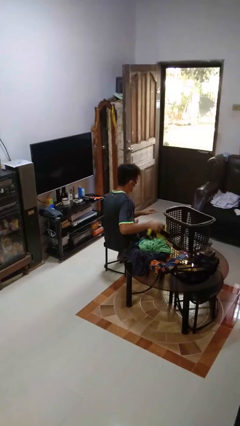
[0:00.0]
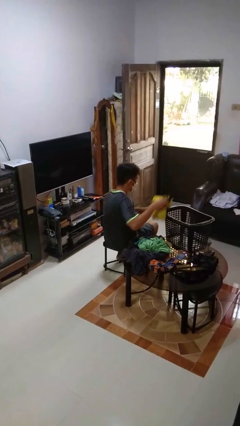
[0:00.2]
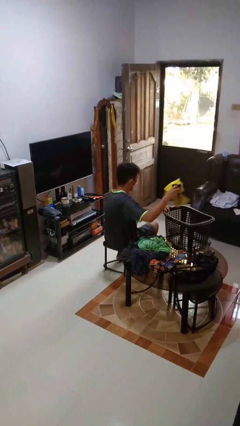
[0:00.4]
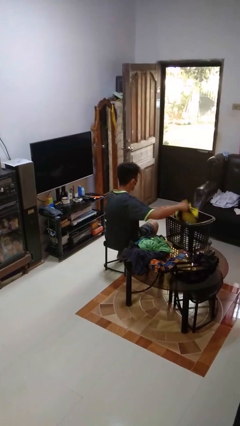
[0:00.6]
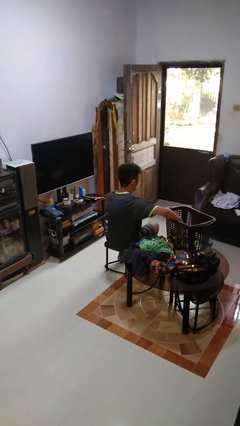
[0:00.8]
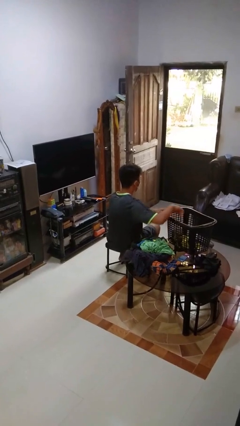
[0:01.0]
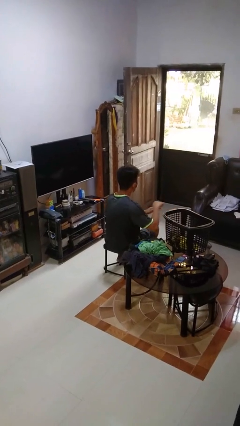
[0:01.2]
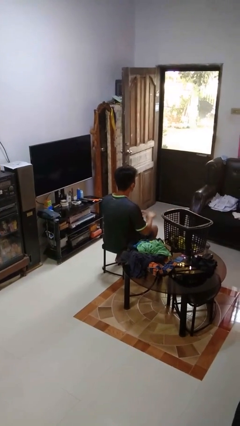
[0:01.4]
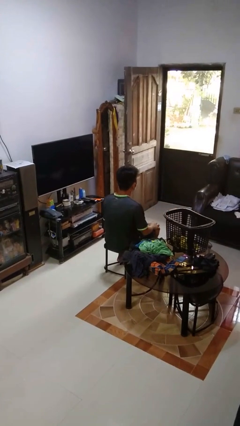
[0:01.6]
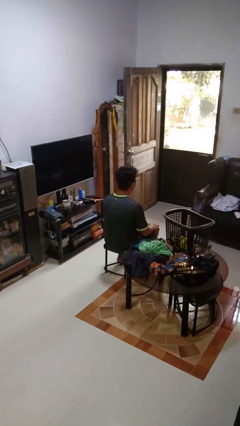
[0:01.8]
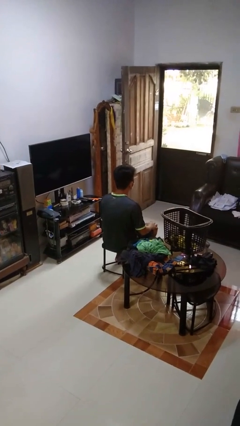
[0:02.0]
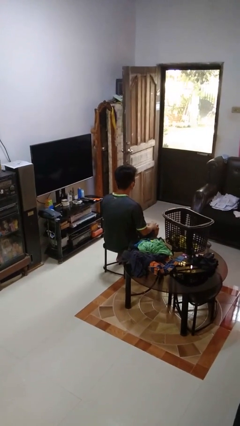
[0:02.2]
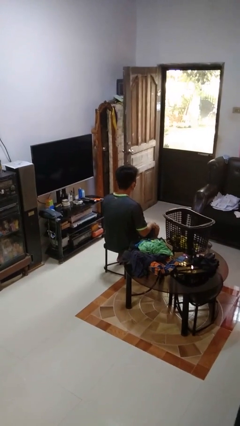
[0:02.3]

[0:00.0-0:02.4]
person puts object into basket

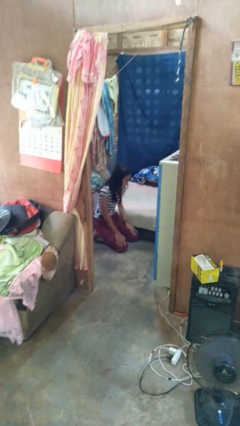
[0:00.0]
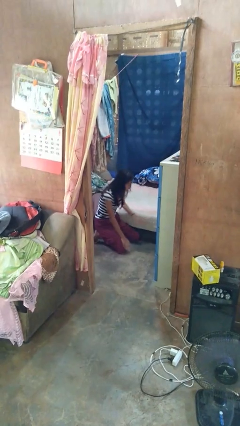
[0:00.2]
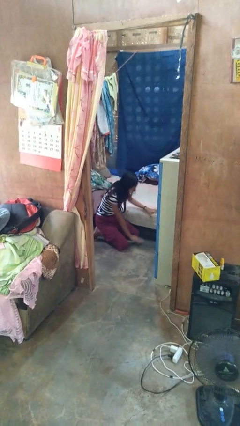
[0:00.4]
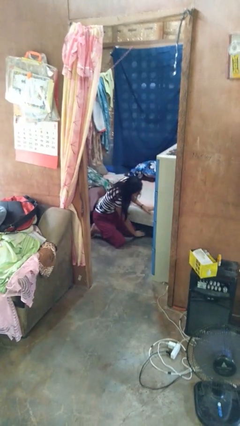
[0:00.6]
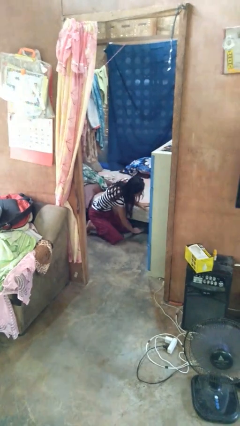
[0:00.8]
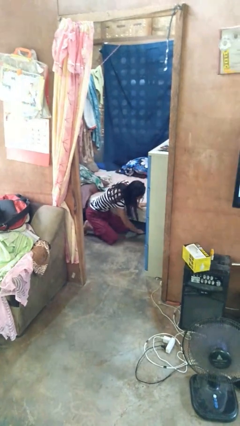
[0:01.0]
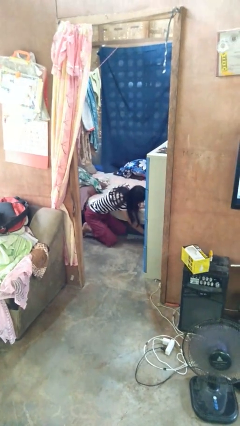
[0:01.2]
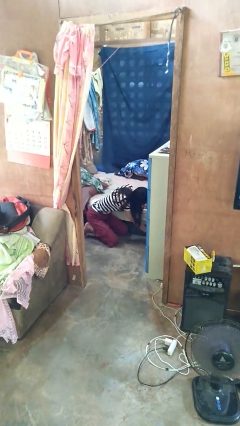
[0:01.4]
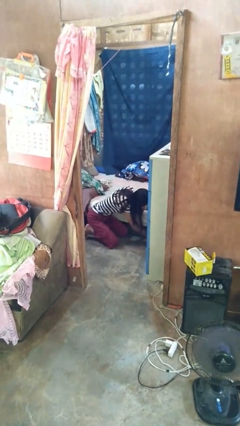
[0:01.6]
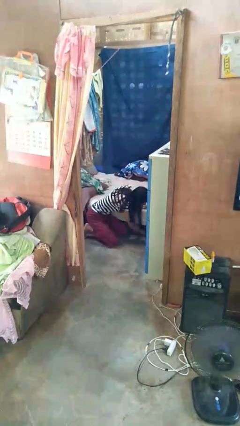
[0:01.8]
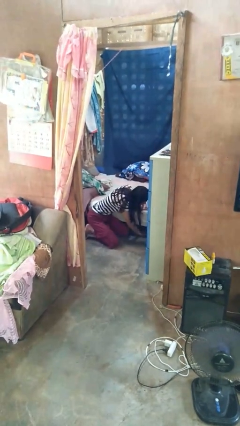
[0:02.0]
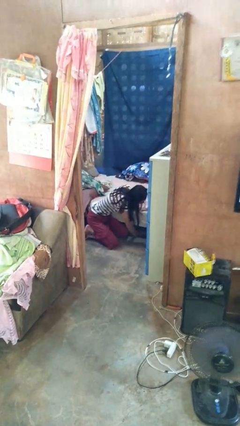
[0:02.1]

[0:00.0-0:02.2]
person searches under bed

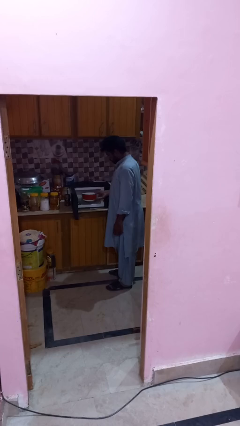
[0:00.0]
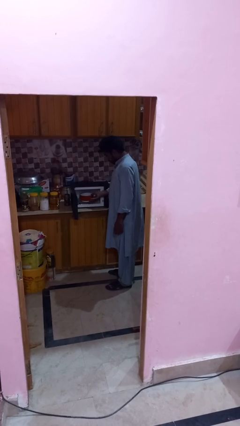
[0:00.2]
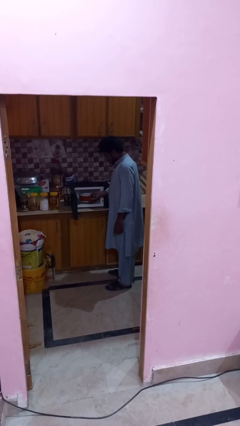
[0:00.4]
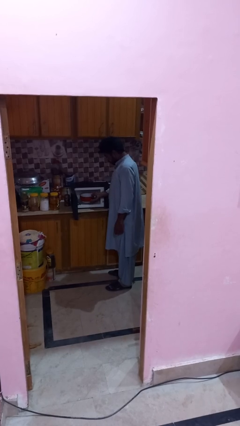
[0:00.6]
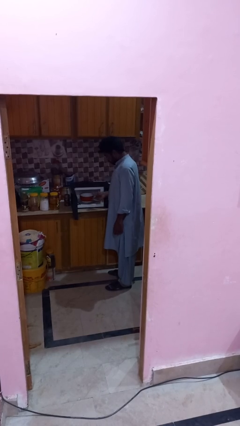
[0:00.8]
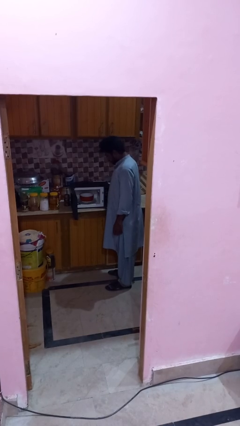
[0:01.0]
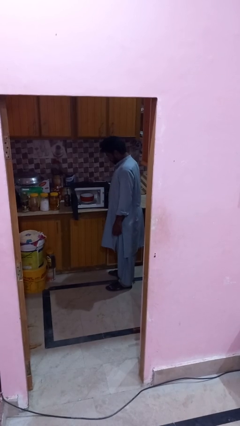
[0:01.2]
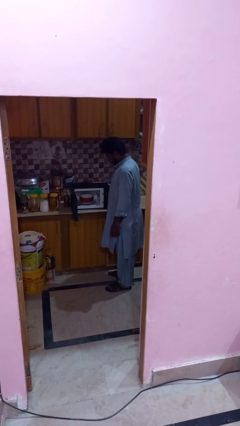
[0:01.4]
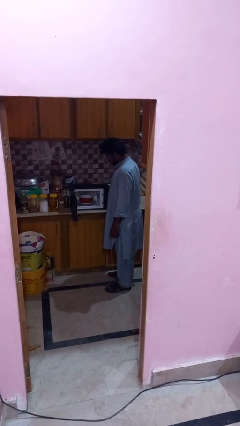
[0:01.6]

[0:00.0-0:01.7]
person puts object into microwave

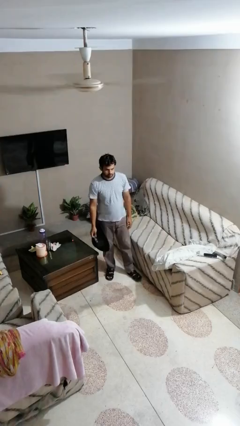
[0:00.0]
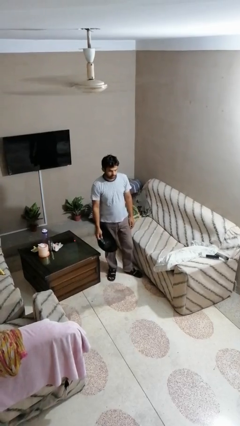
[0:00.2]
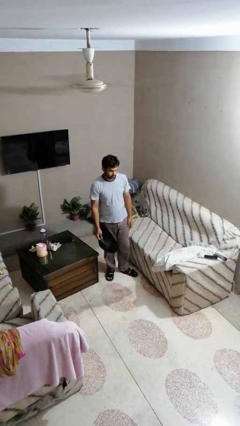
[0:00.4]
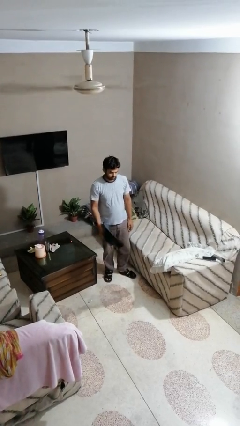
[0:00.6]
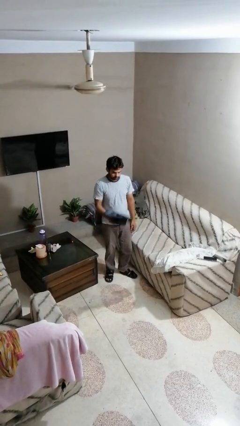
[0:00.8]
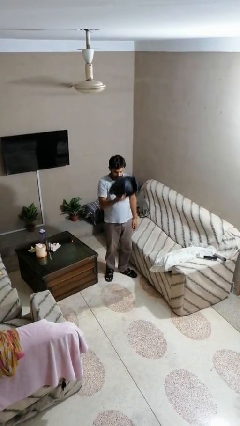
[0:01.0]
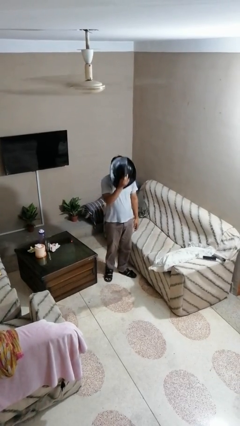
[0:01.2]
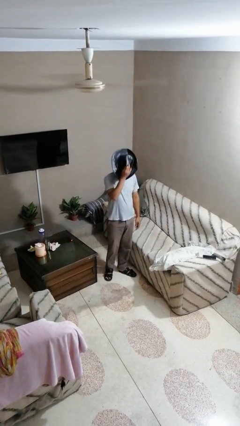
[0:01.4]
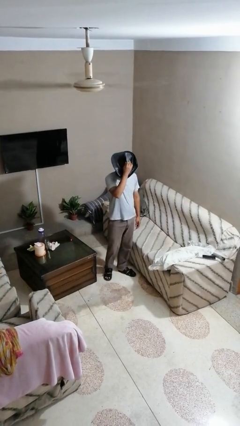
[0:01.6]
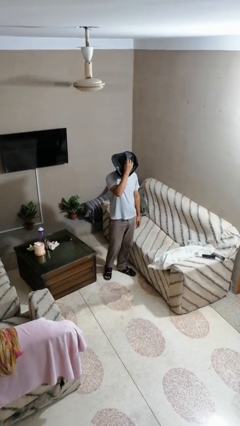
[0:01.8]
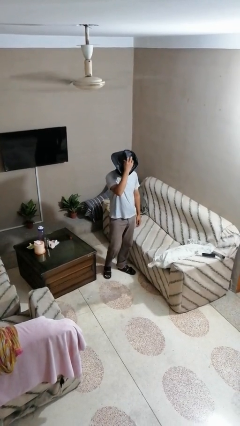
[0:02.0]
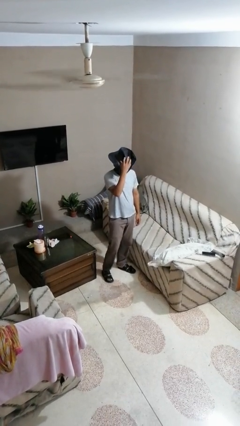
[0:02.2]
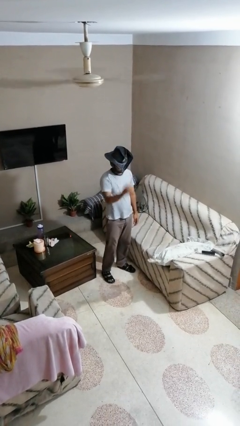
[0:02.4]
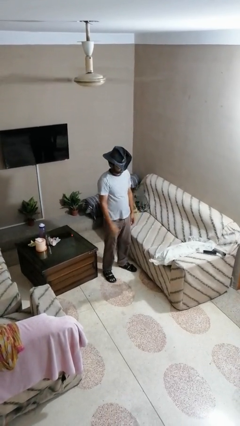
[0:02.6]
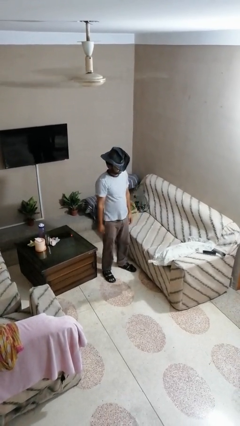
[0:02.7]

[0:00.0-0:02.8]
person puts on hat

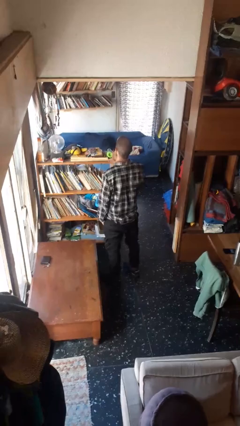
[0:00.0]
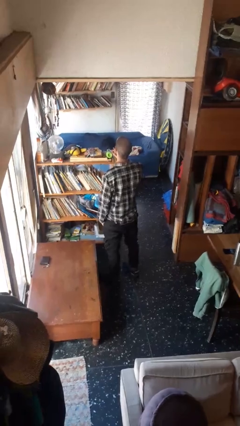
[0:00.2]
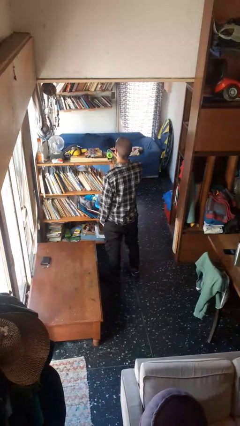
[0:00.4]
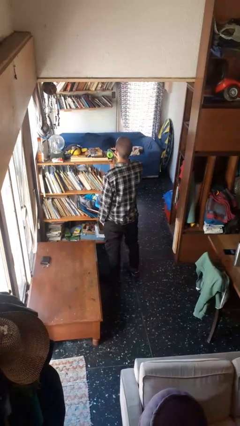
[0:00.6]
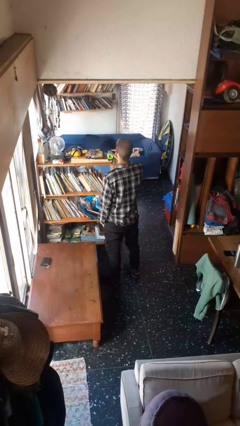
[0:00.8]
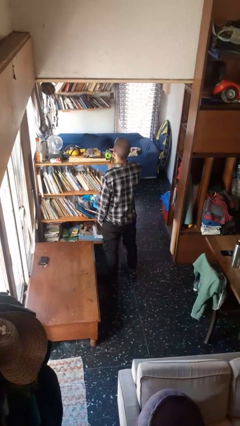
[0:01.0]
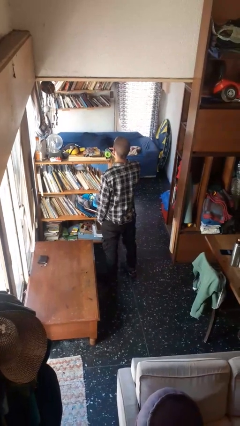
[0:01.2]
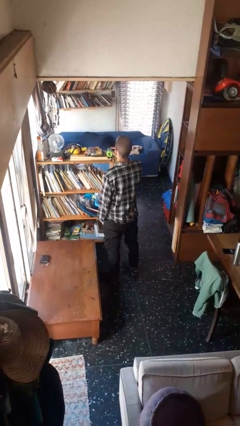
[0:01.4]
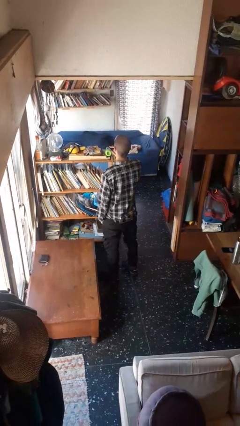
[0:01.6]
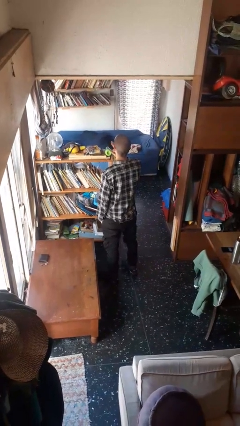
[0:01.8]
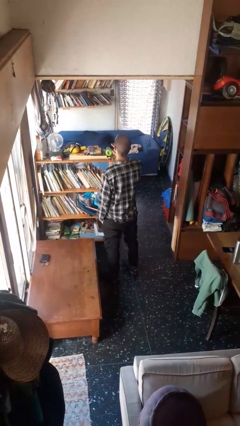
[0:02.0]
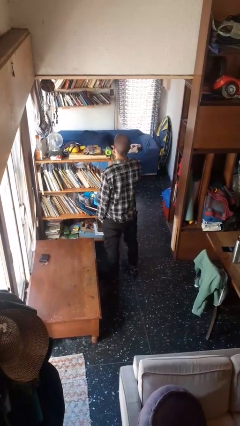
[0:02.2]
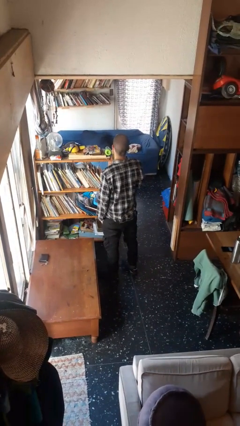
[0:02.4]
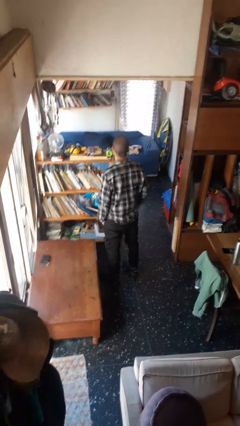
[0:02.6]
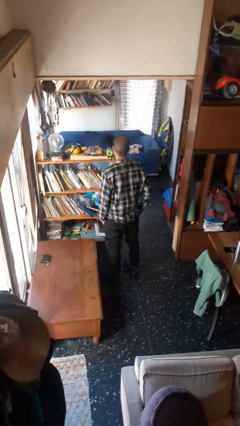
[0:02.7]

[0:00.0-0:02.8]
person gestures be quiet

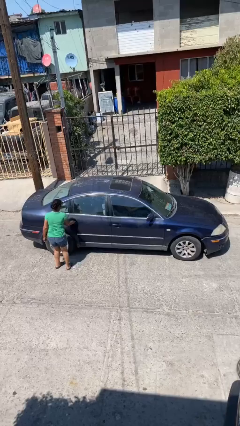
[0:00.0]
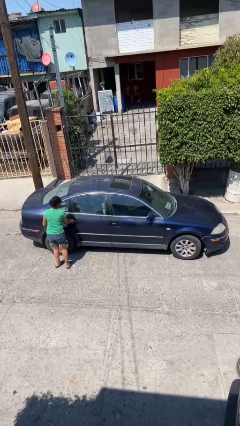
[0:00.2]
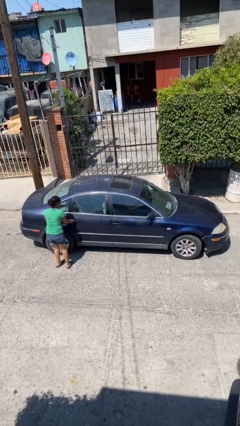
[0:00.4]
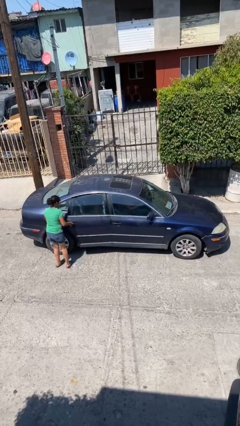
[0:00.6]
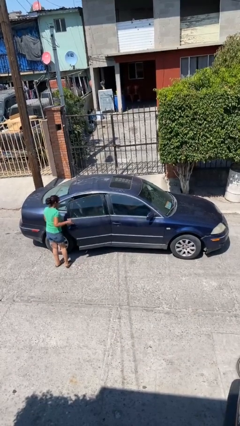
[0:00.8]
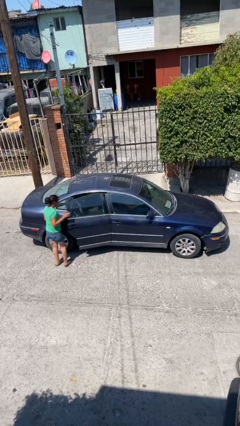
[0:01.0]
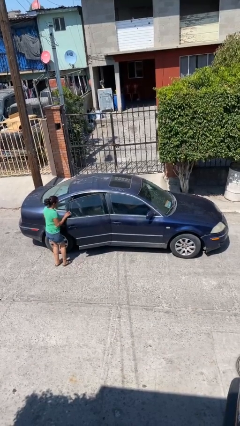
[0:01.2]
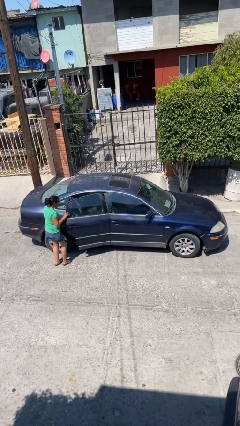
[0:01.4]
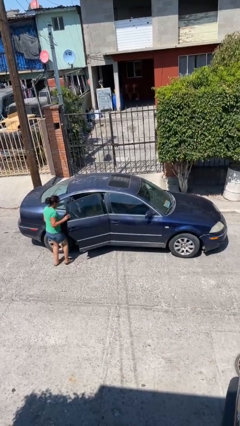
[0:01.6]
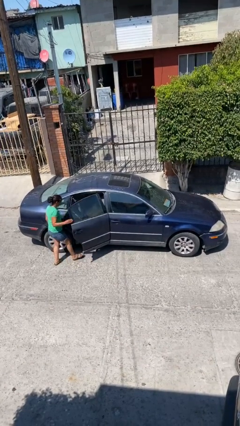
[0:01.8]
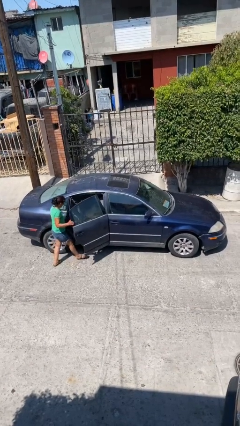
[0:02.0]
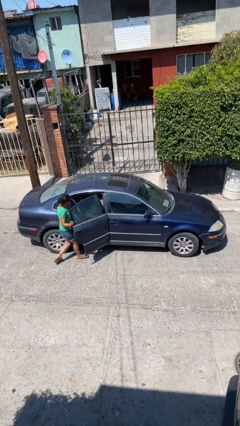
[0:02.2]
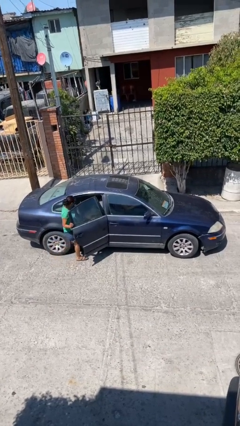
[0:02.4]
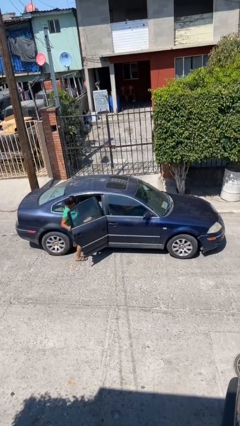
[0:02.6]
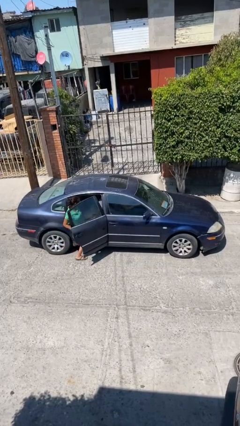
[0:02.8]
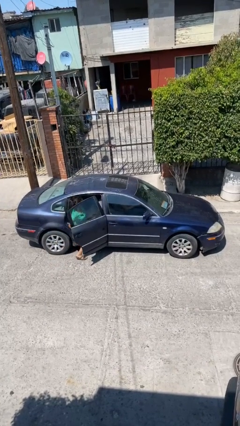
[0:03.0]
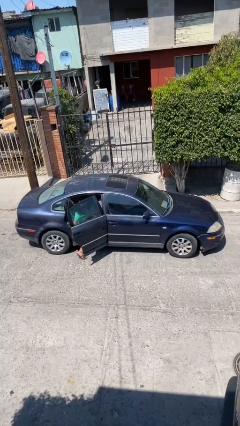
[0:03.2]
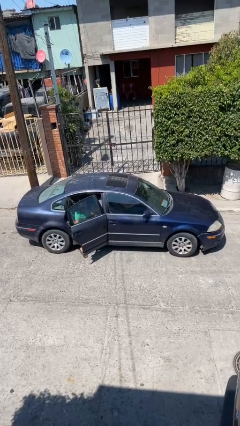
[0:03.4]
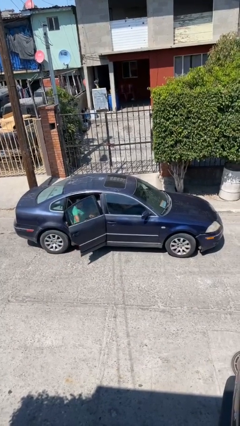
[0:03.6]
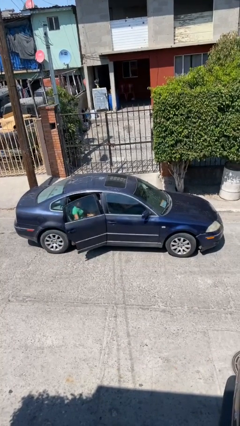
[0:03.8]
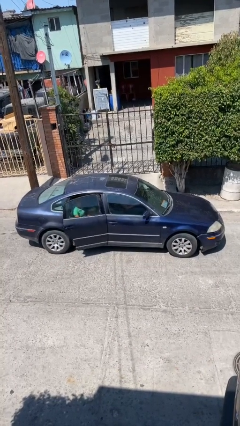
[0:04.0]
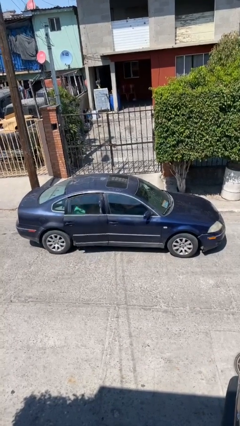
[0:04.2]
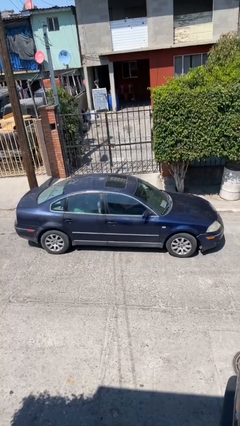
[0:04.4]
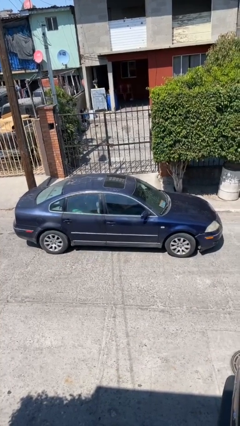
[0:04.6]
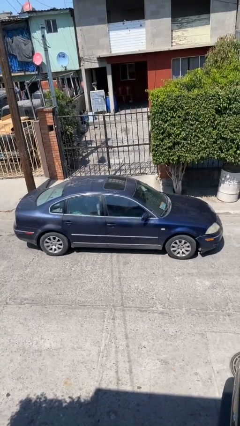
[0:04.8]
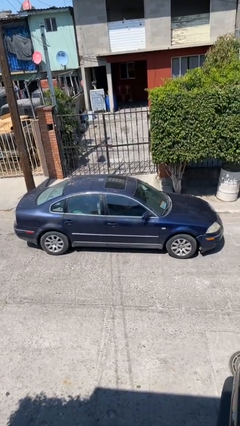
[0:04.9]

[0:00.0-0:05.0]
car picks up person

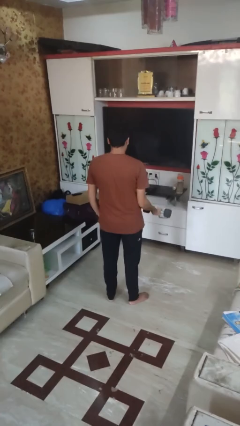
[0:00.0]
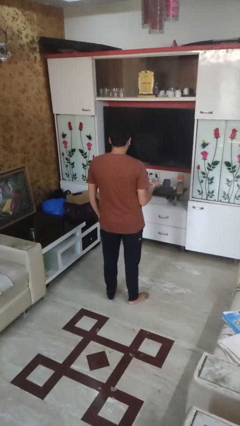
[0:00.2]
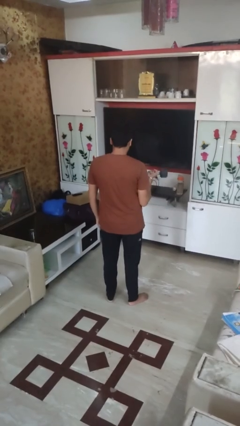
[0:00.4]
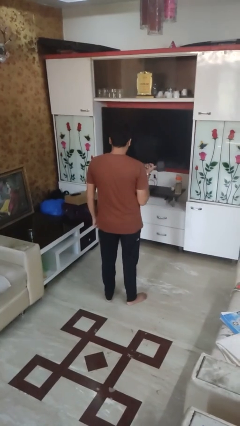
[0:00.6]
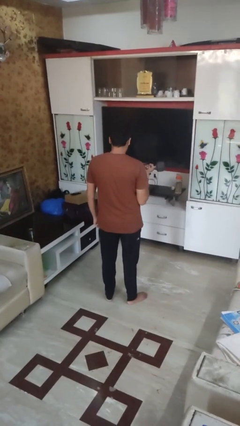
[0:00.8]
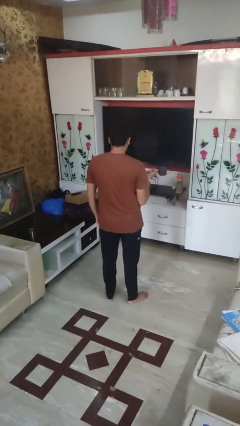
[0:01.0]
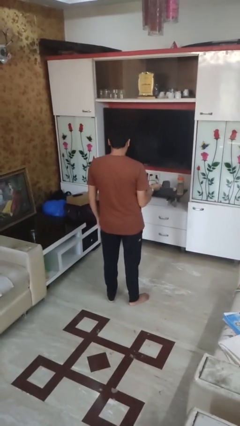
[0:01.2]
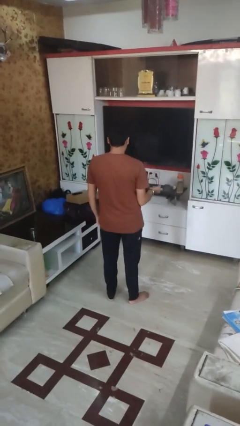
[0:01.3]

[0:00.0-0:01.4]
person lifts dumbbells
